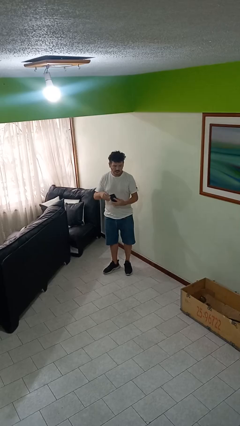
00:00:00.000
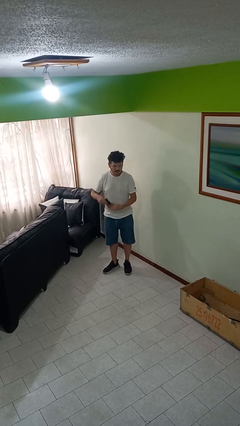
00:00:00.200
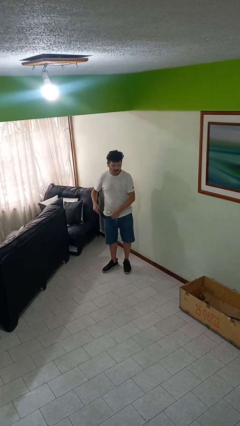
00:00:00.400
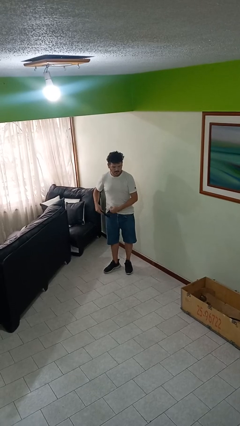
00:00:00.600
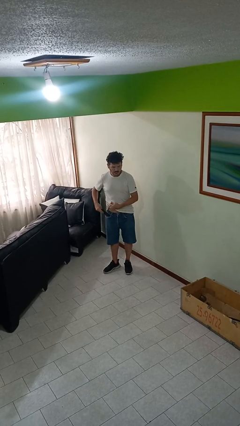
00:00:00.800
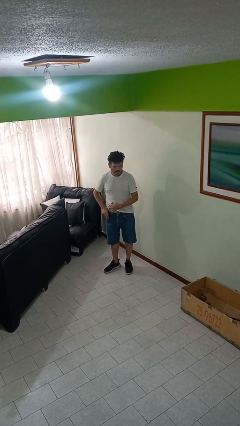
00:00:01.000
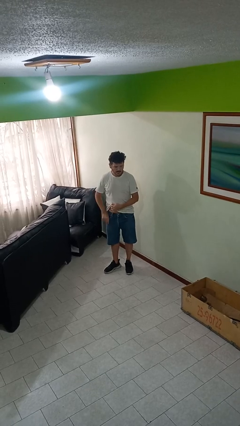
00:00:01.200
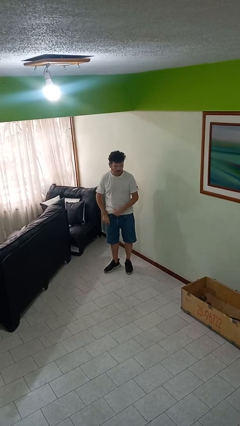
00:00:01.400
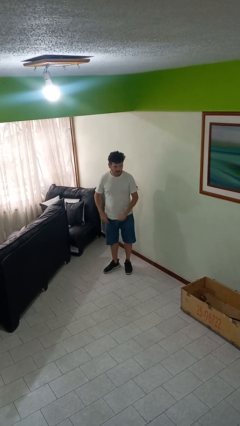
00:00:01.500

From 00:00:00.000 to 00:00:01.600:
person puts phone into pocket

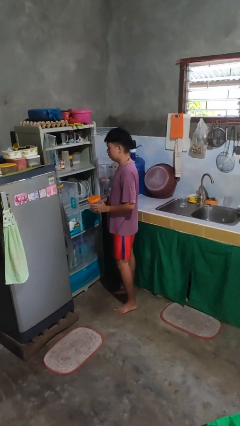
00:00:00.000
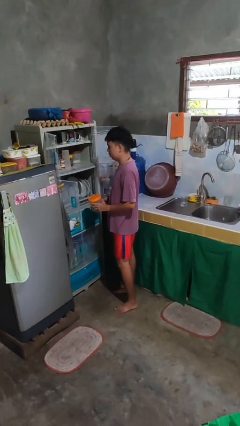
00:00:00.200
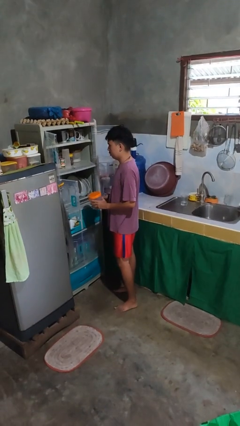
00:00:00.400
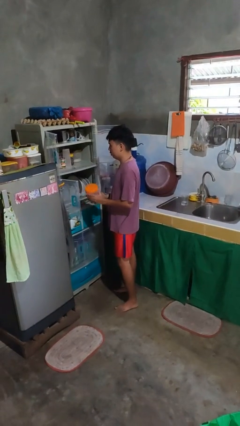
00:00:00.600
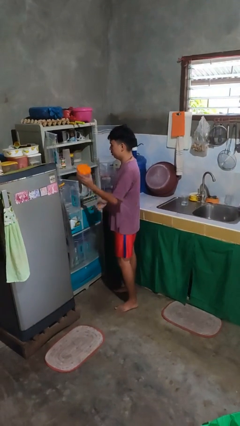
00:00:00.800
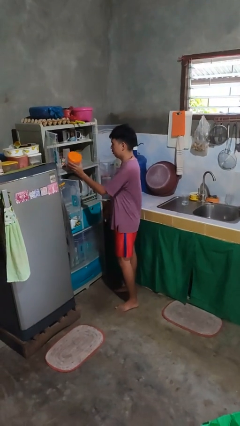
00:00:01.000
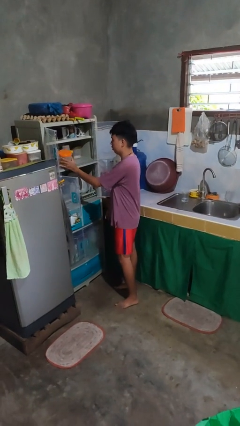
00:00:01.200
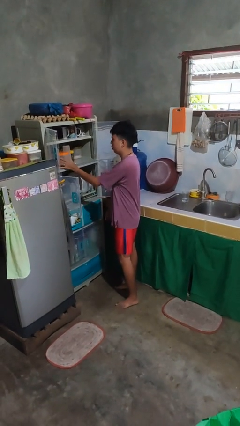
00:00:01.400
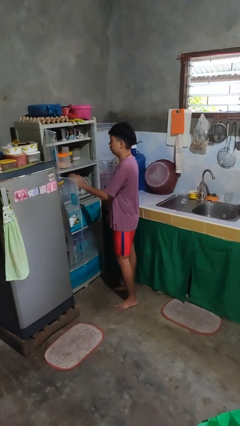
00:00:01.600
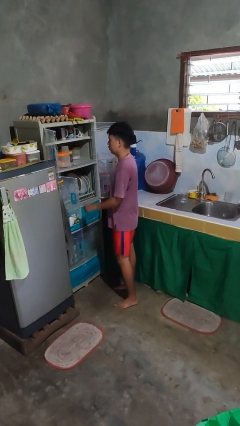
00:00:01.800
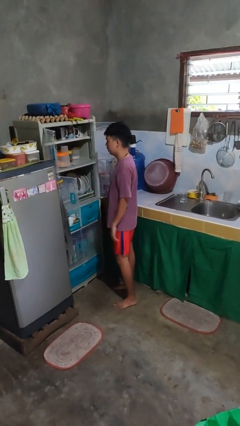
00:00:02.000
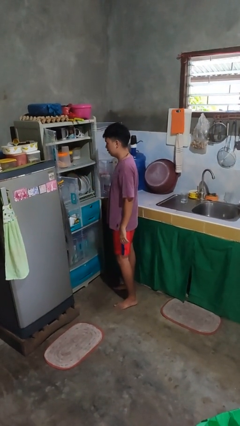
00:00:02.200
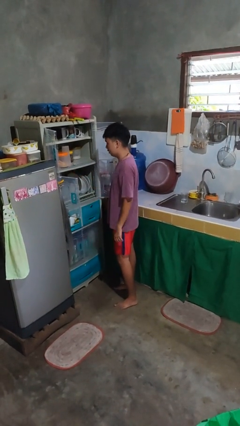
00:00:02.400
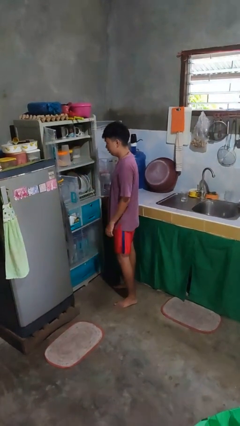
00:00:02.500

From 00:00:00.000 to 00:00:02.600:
person puts object in cabinet

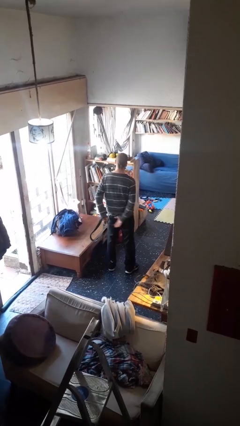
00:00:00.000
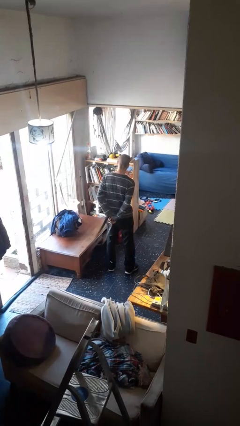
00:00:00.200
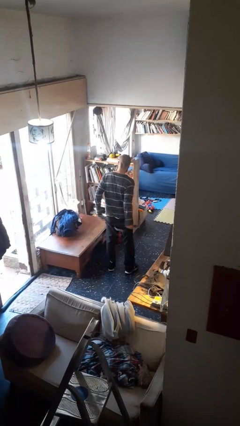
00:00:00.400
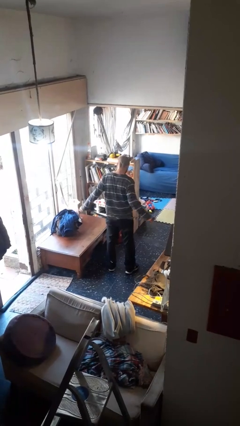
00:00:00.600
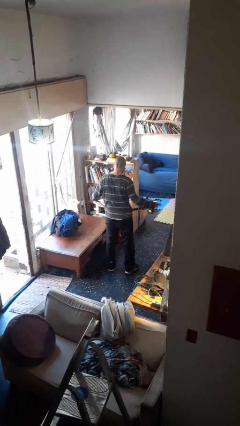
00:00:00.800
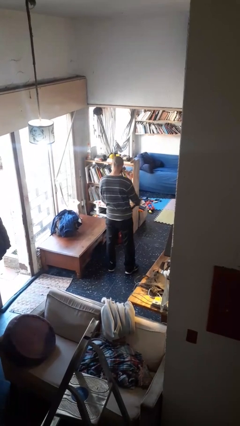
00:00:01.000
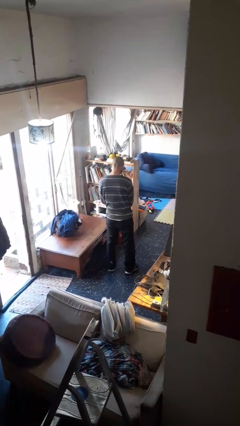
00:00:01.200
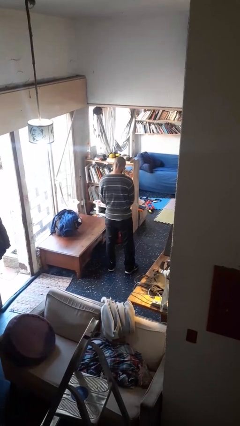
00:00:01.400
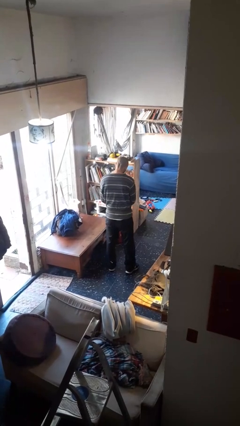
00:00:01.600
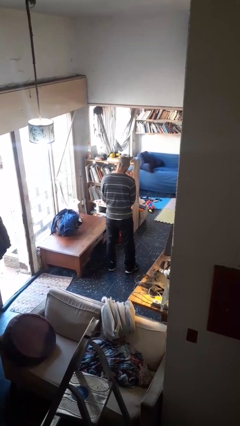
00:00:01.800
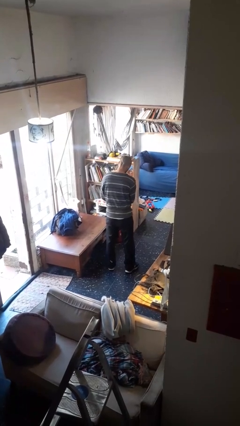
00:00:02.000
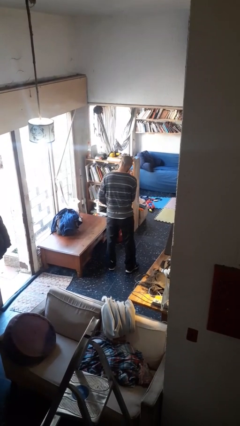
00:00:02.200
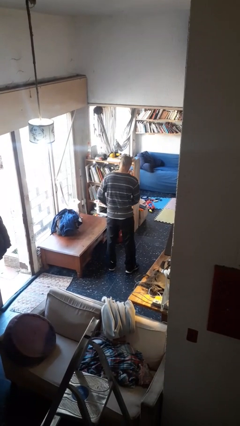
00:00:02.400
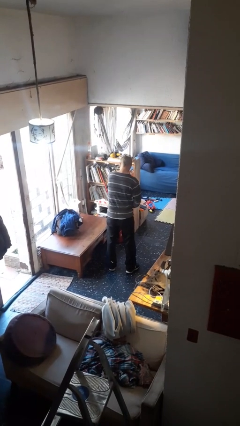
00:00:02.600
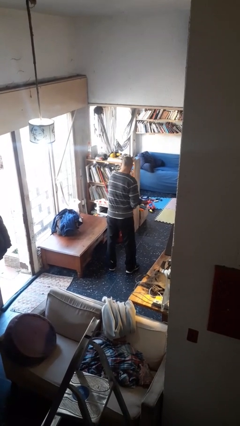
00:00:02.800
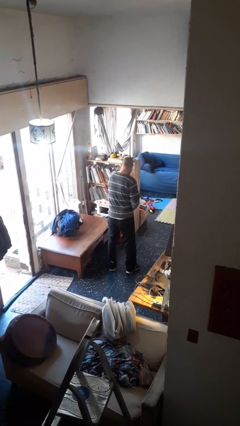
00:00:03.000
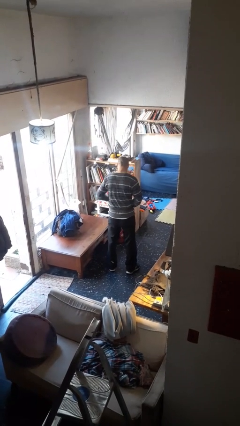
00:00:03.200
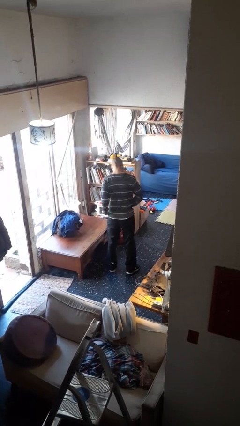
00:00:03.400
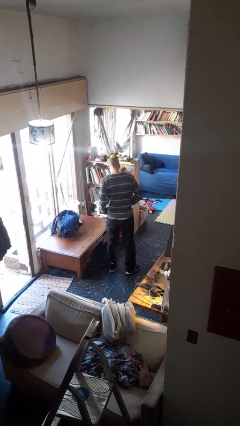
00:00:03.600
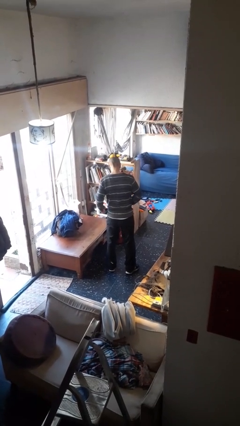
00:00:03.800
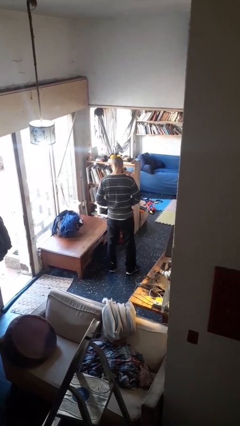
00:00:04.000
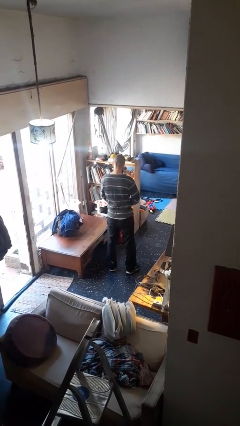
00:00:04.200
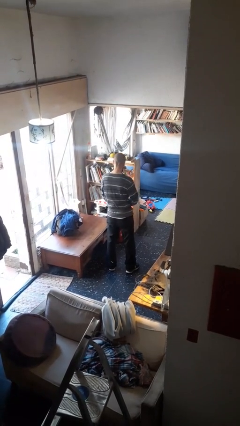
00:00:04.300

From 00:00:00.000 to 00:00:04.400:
person puts on belt

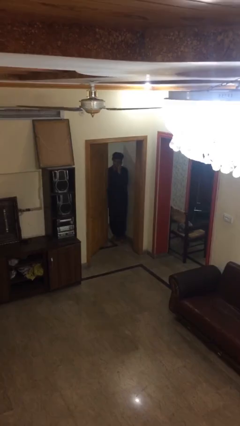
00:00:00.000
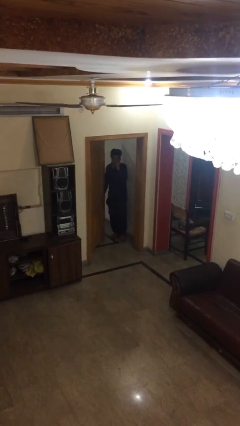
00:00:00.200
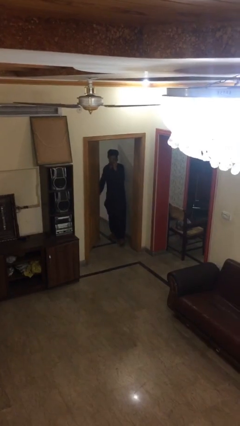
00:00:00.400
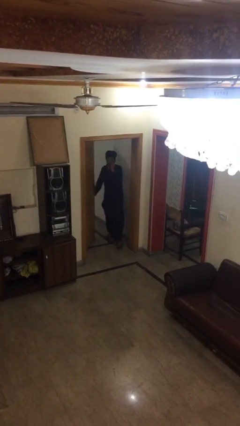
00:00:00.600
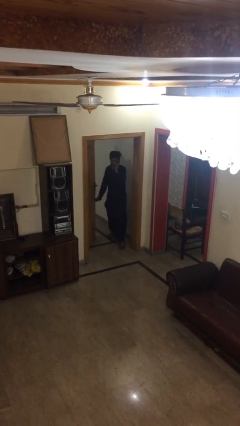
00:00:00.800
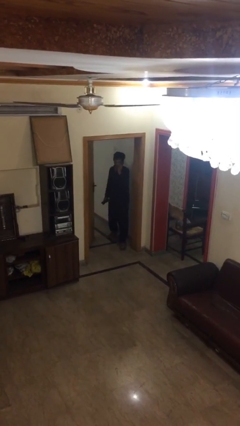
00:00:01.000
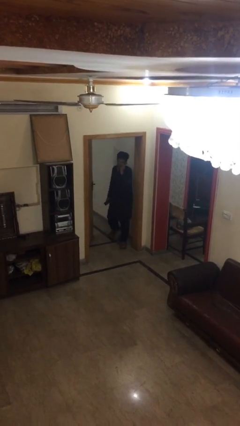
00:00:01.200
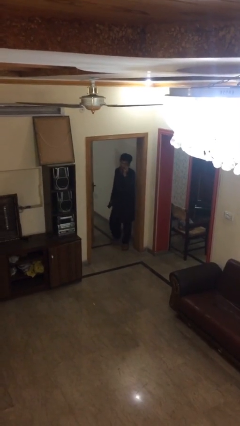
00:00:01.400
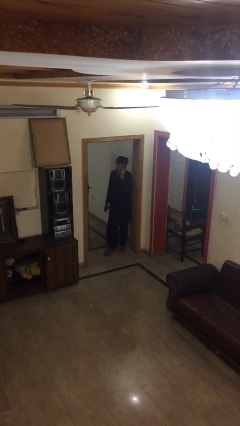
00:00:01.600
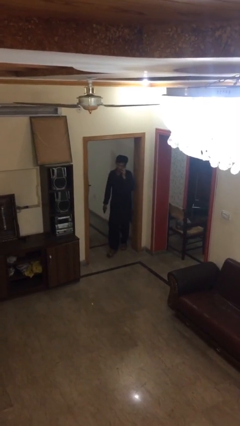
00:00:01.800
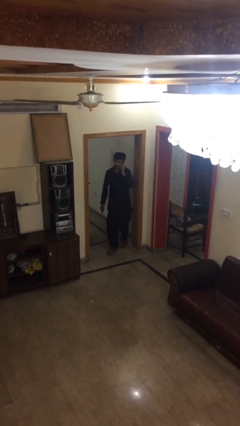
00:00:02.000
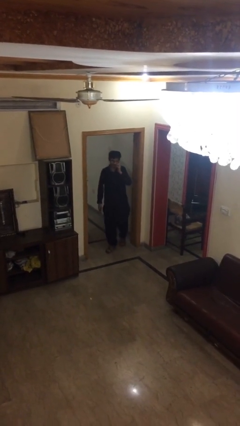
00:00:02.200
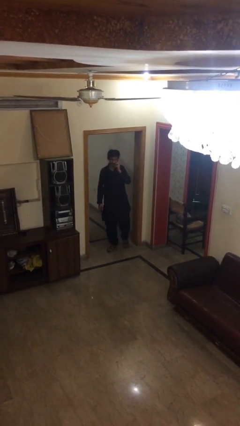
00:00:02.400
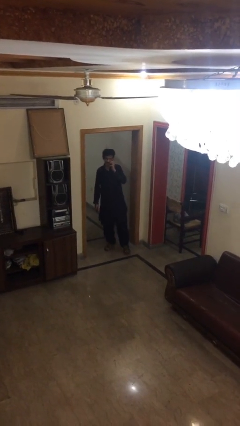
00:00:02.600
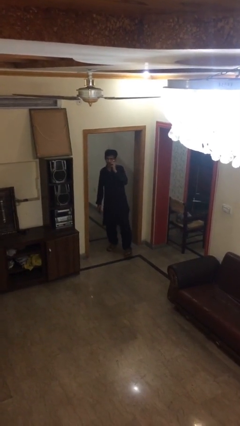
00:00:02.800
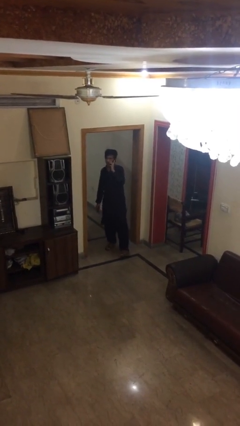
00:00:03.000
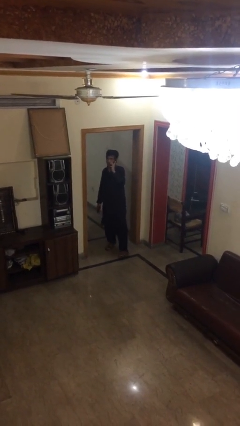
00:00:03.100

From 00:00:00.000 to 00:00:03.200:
person enters scene through structure

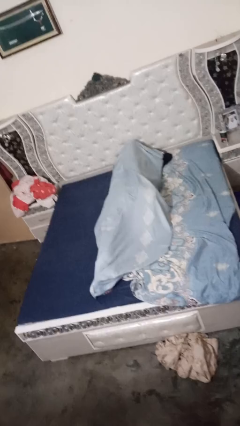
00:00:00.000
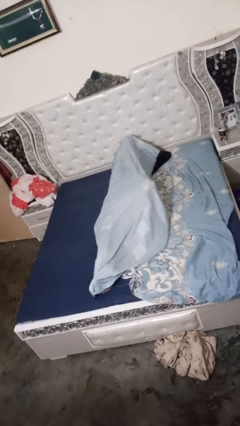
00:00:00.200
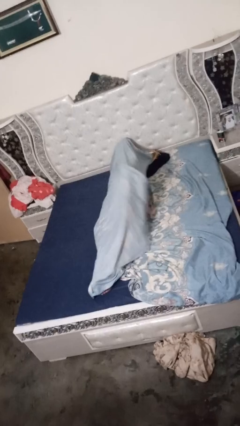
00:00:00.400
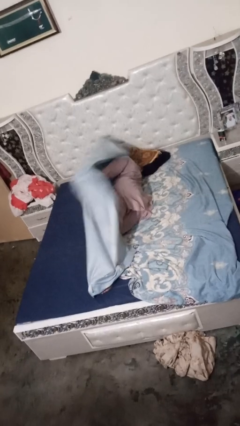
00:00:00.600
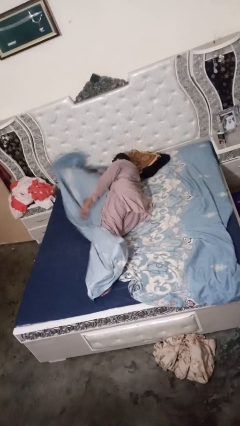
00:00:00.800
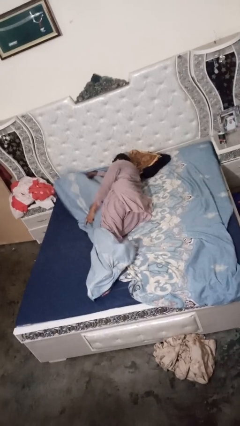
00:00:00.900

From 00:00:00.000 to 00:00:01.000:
person uncovers with bedsheets

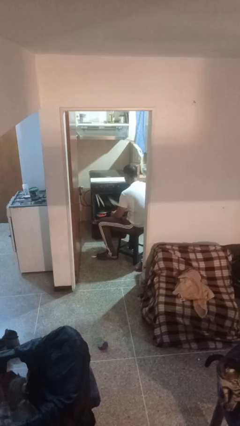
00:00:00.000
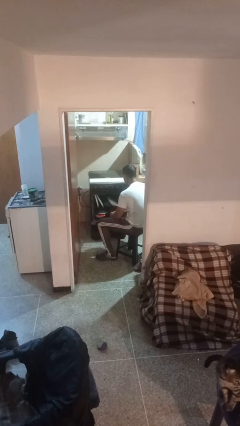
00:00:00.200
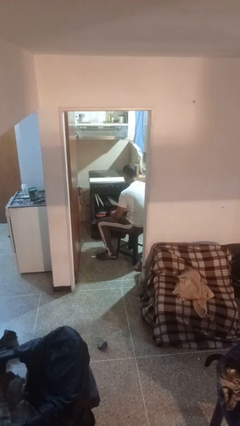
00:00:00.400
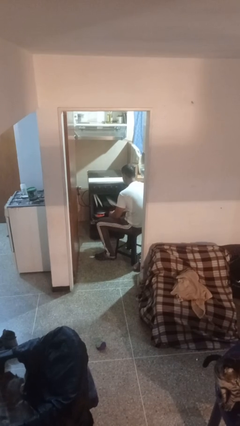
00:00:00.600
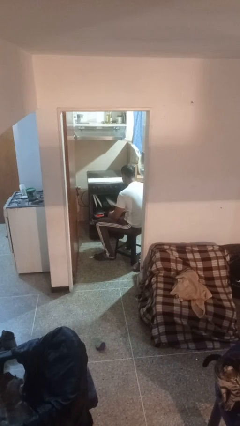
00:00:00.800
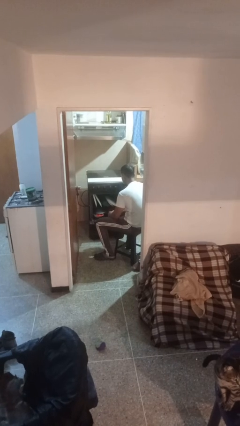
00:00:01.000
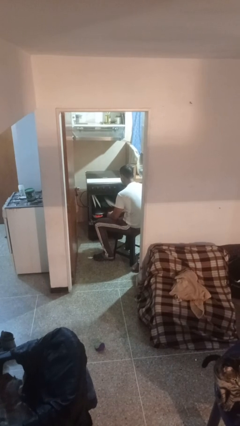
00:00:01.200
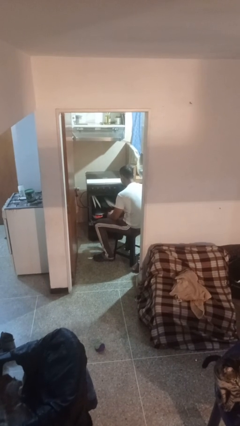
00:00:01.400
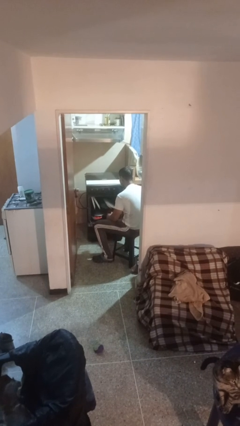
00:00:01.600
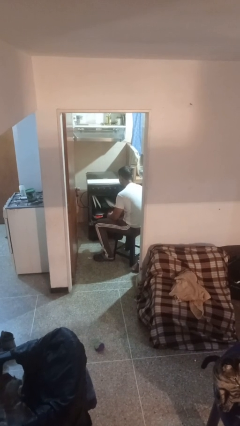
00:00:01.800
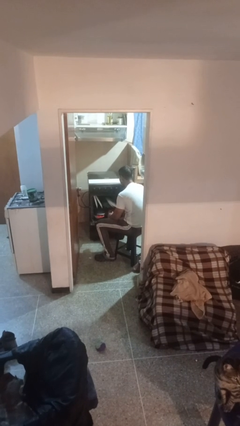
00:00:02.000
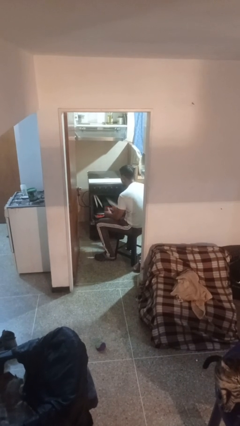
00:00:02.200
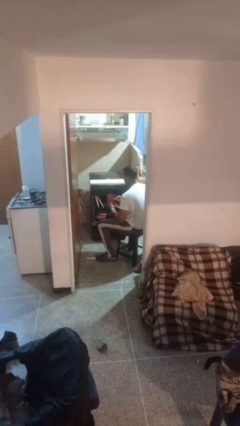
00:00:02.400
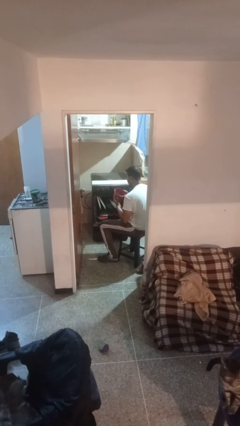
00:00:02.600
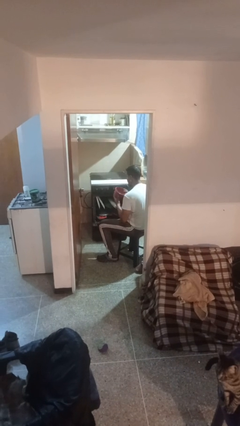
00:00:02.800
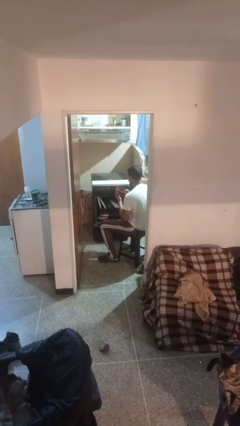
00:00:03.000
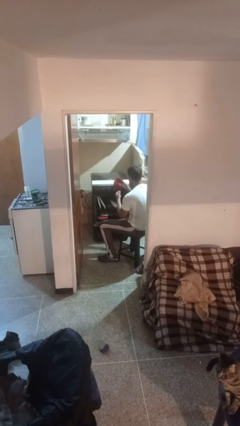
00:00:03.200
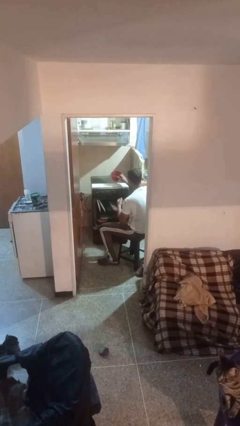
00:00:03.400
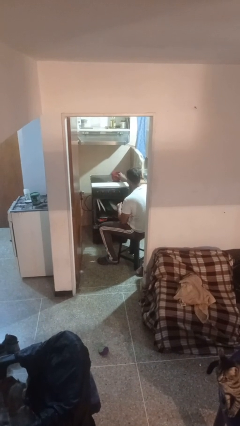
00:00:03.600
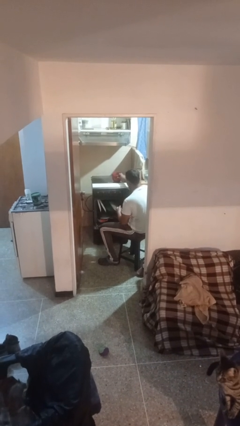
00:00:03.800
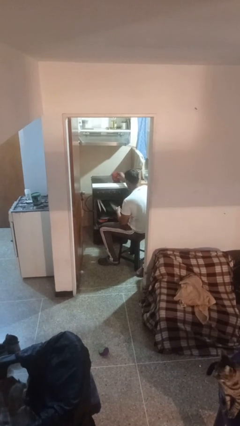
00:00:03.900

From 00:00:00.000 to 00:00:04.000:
person unloads dishwasher

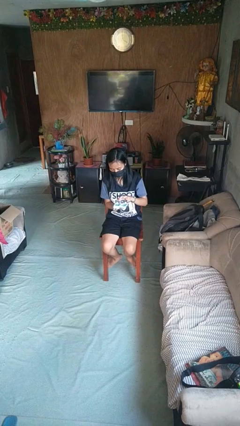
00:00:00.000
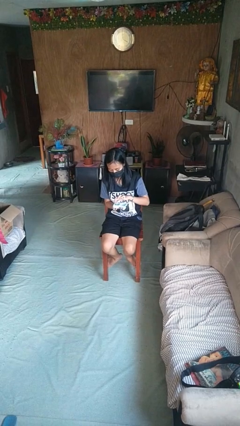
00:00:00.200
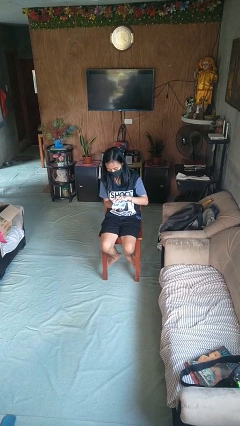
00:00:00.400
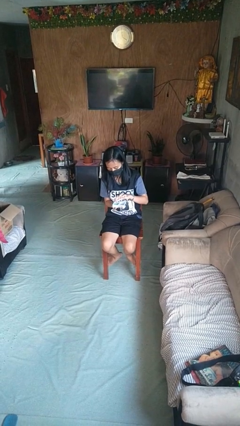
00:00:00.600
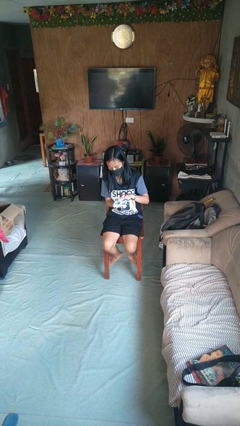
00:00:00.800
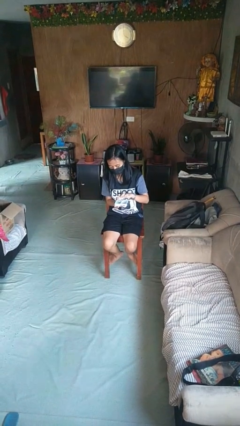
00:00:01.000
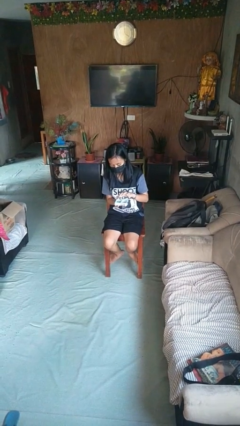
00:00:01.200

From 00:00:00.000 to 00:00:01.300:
person searches jewelry box
